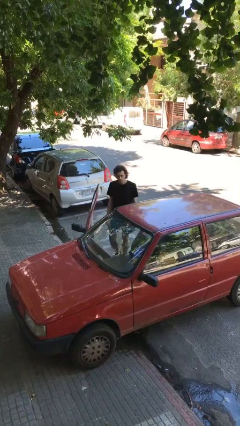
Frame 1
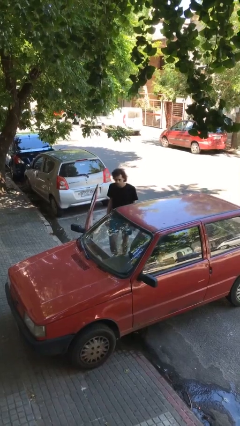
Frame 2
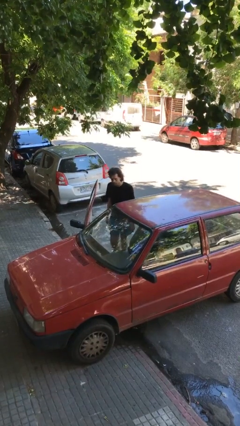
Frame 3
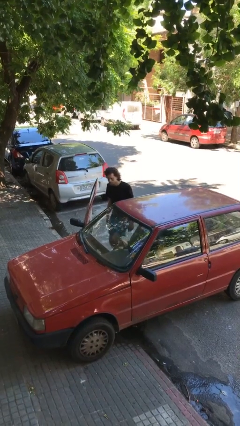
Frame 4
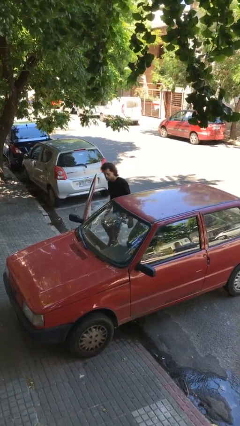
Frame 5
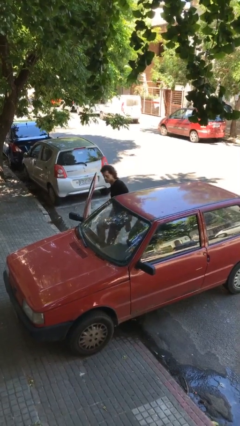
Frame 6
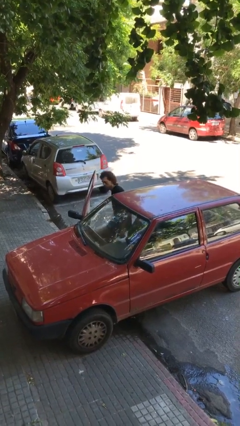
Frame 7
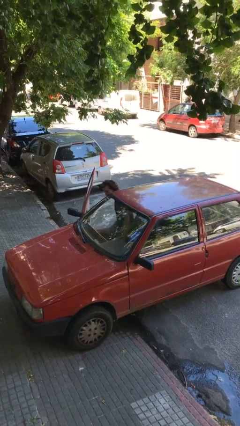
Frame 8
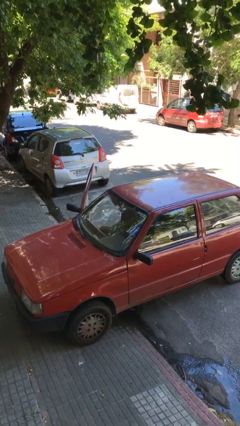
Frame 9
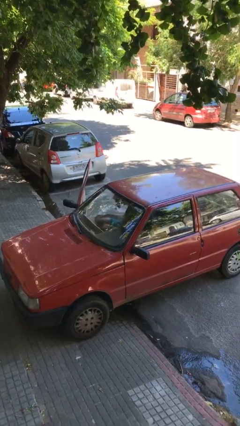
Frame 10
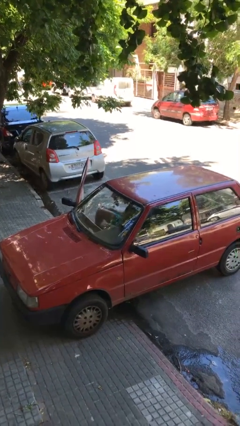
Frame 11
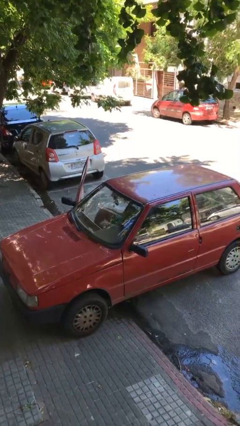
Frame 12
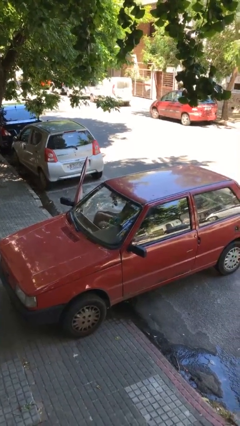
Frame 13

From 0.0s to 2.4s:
person enters car

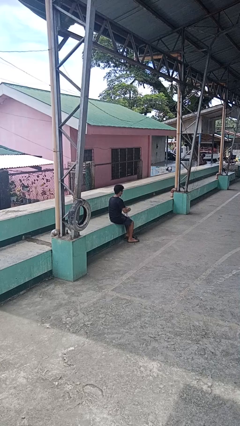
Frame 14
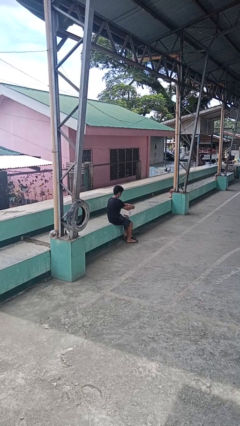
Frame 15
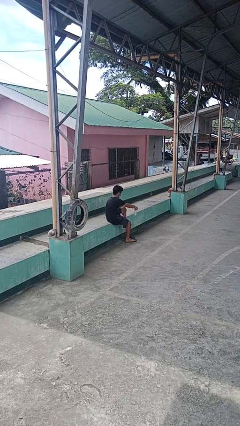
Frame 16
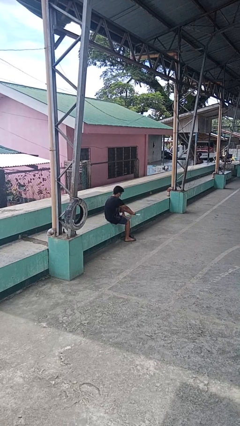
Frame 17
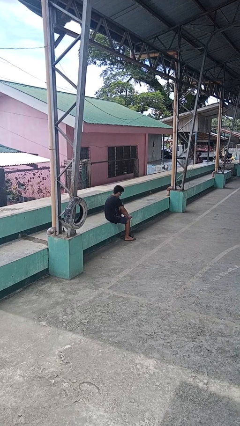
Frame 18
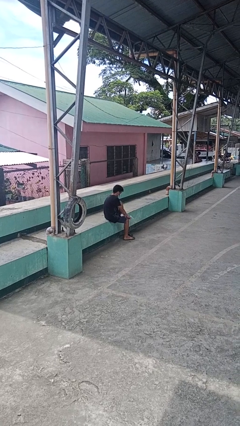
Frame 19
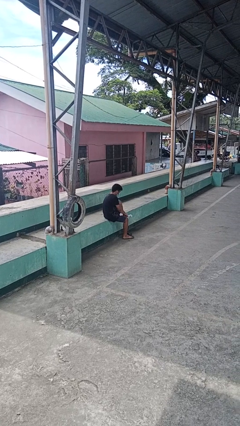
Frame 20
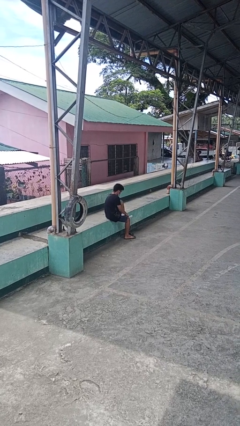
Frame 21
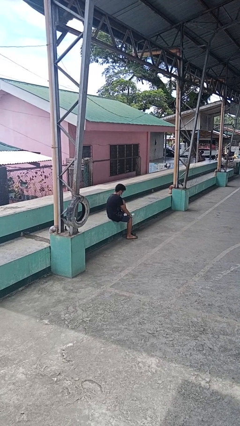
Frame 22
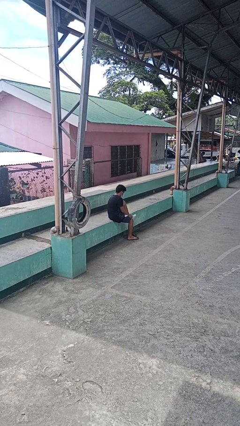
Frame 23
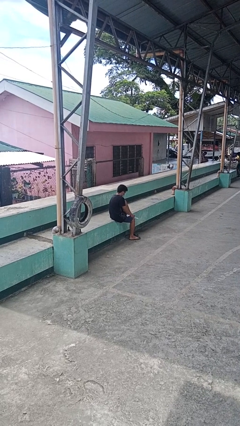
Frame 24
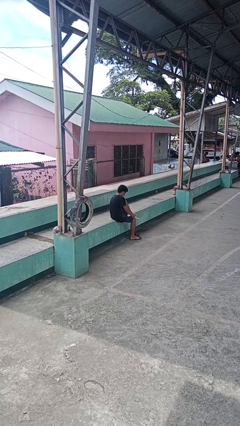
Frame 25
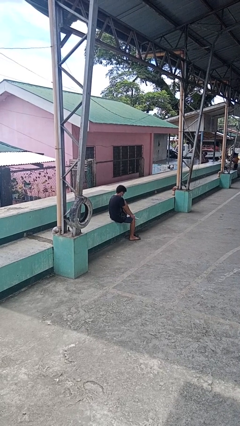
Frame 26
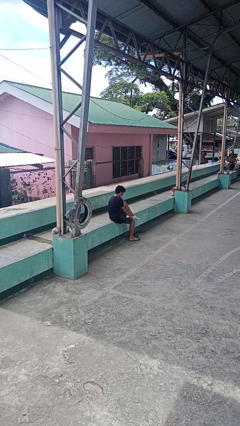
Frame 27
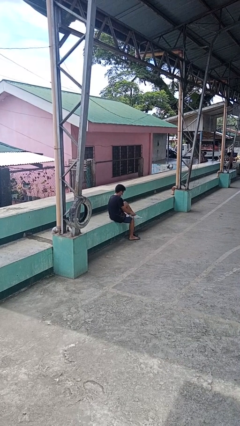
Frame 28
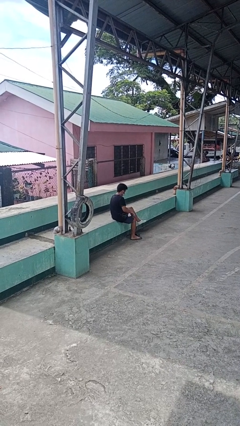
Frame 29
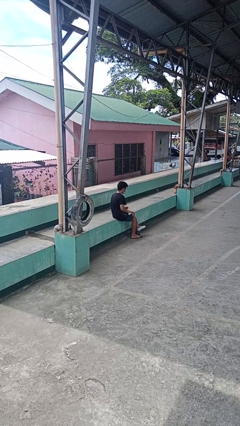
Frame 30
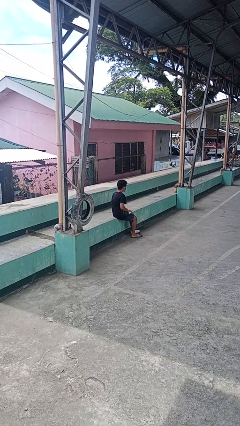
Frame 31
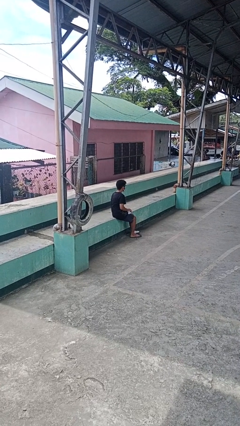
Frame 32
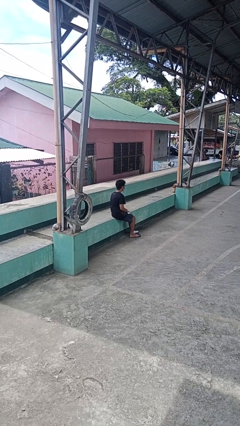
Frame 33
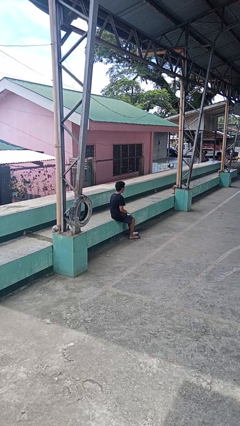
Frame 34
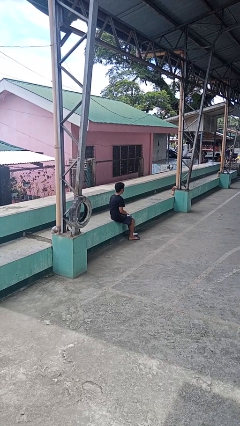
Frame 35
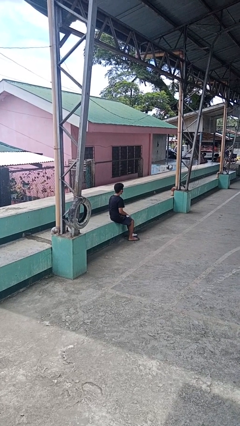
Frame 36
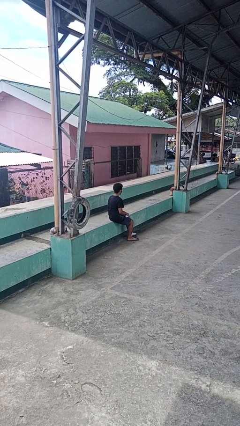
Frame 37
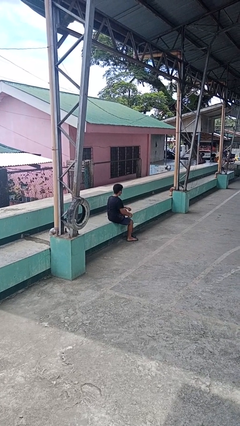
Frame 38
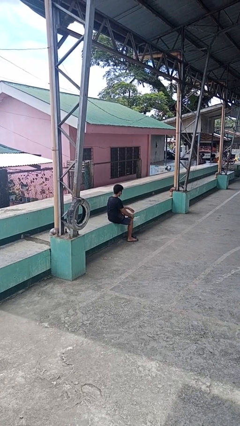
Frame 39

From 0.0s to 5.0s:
person puts on socks

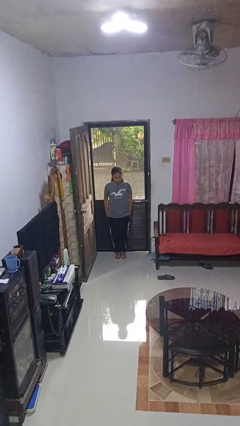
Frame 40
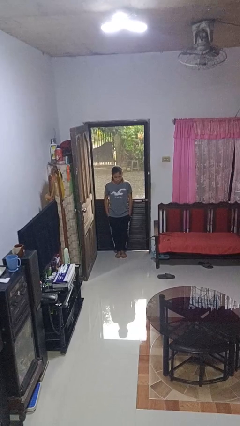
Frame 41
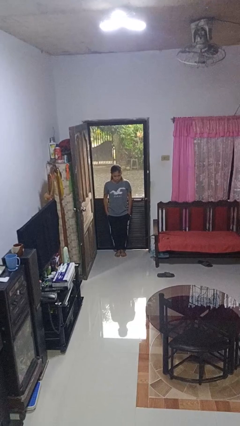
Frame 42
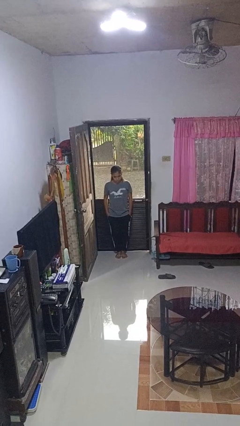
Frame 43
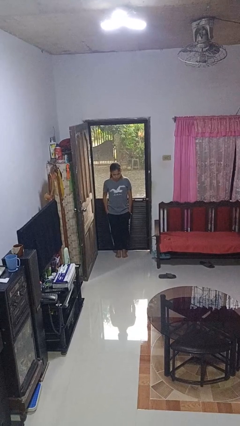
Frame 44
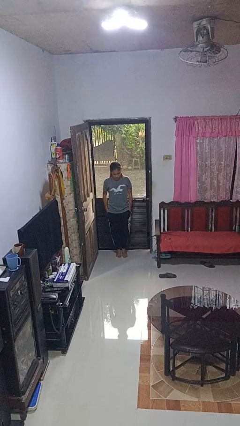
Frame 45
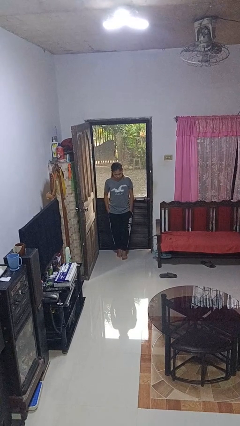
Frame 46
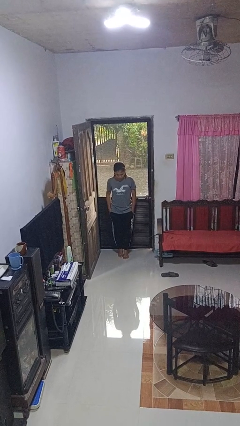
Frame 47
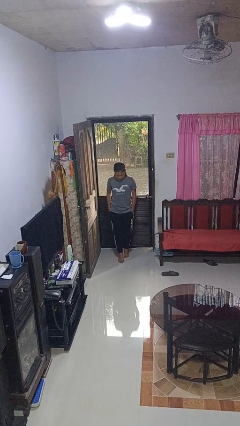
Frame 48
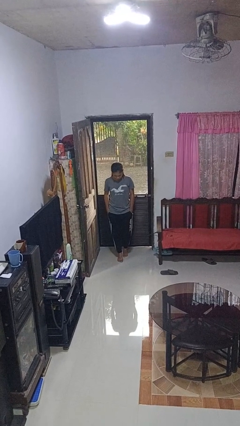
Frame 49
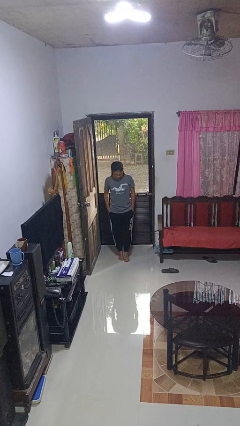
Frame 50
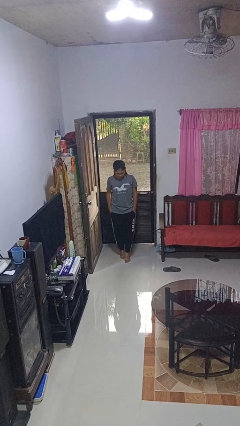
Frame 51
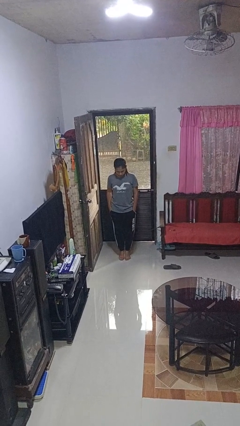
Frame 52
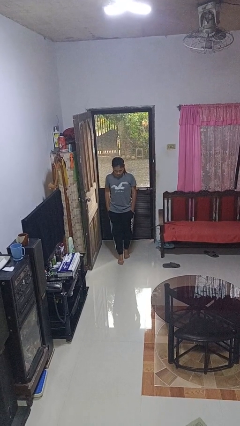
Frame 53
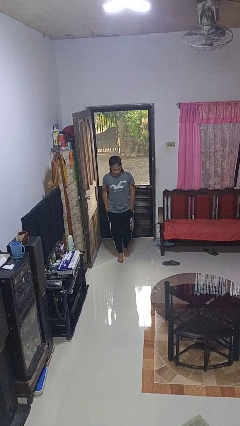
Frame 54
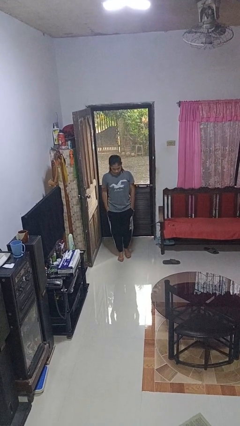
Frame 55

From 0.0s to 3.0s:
person walks tiptoe

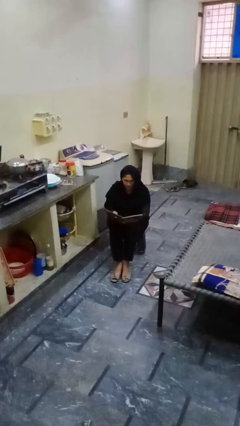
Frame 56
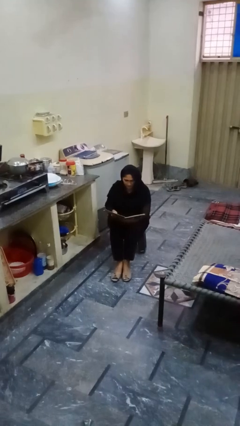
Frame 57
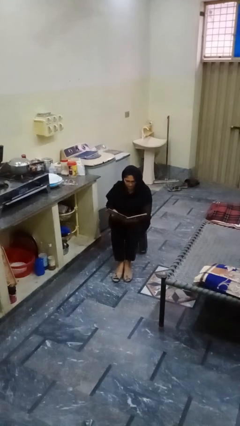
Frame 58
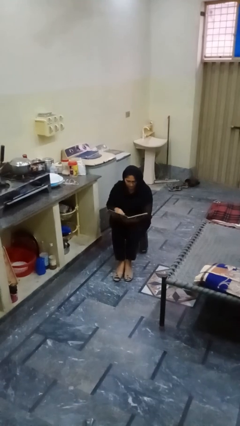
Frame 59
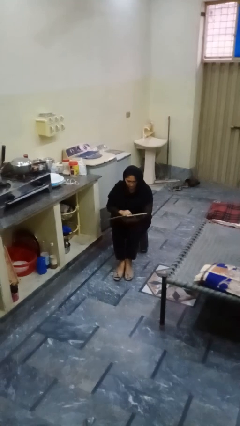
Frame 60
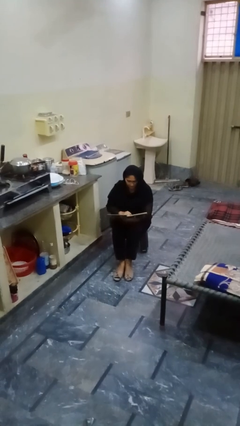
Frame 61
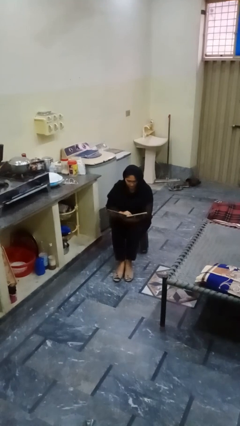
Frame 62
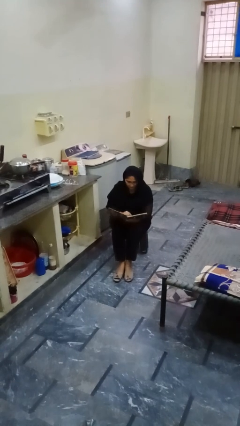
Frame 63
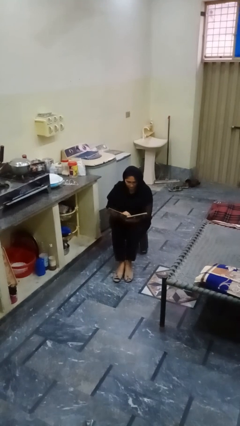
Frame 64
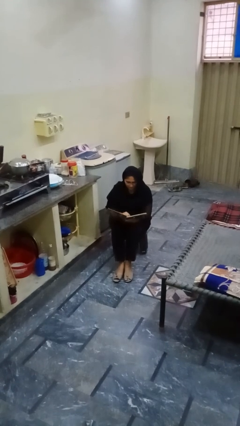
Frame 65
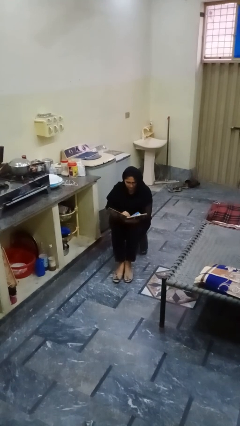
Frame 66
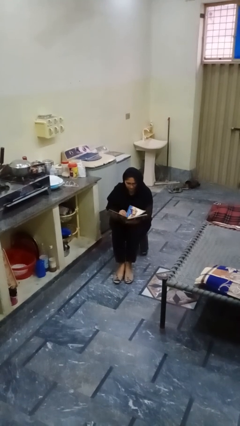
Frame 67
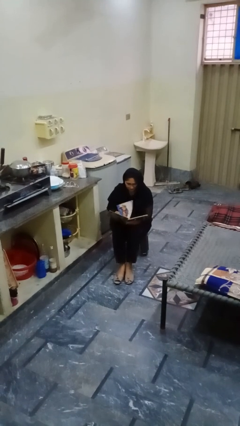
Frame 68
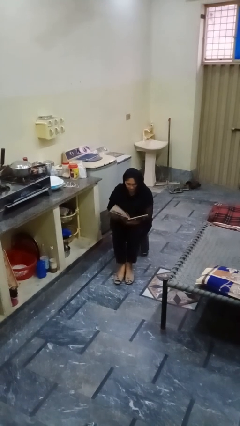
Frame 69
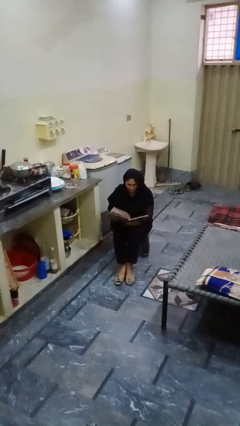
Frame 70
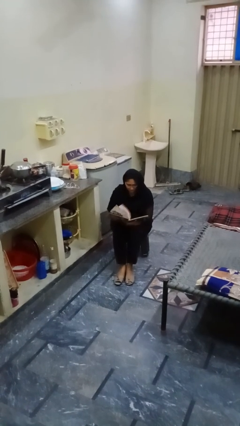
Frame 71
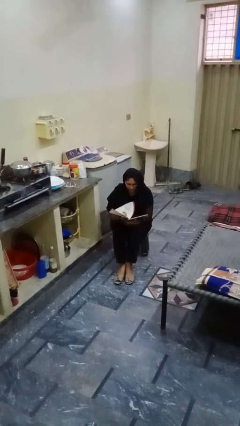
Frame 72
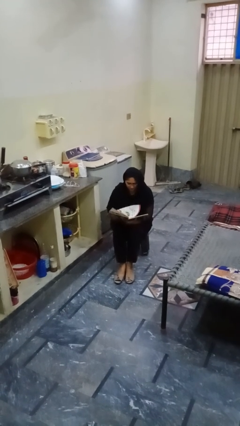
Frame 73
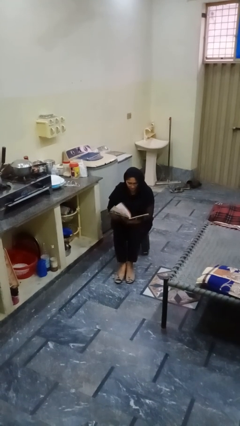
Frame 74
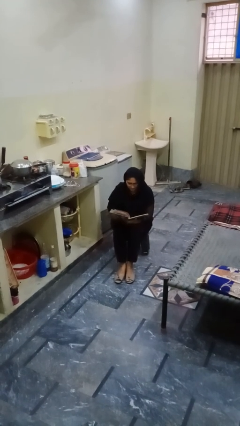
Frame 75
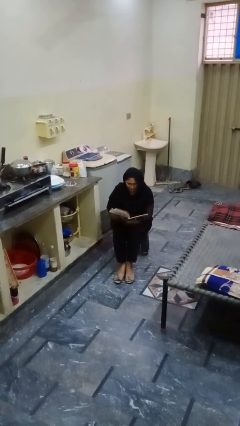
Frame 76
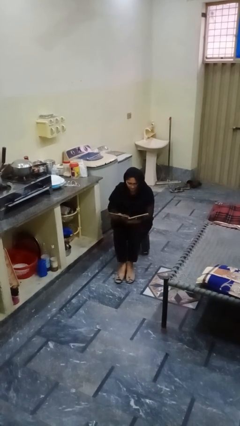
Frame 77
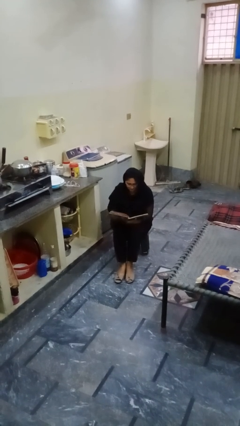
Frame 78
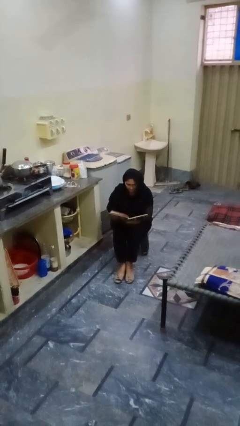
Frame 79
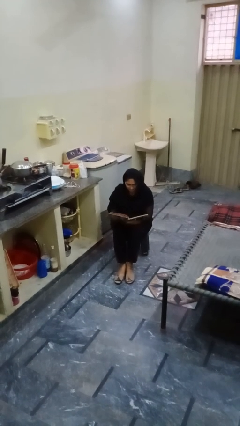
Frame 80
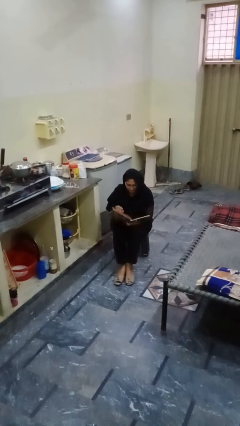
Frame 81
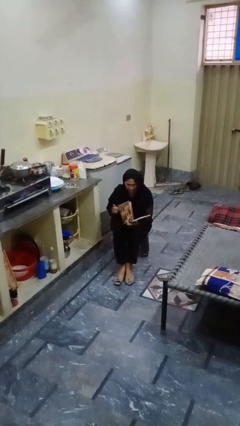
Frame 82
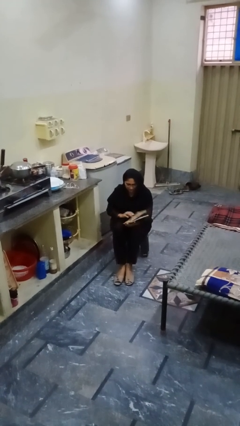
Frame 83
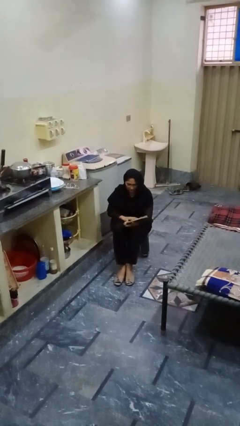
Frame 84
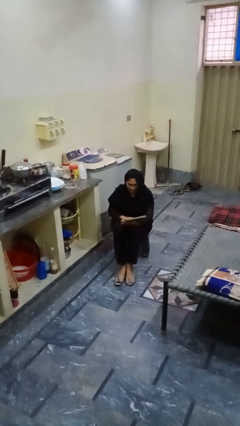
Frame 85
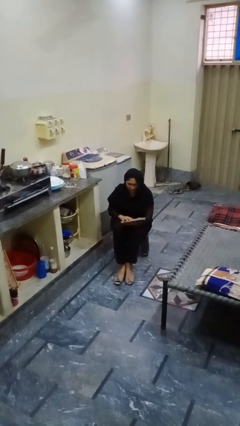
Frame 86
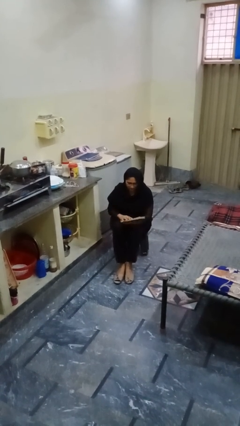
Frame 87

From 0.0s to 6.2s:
person reads book

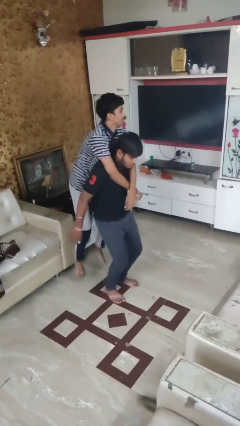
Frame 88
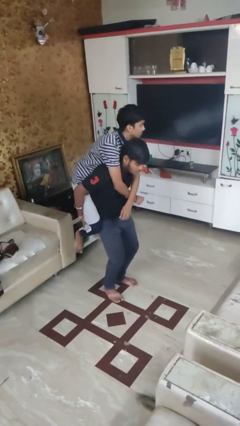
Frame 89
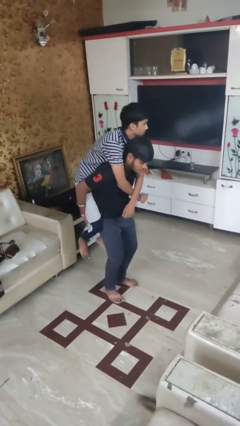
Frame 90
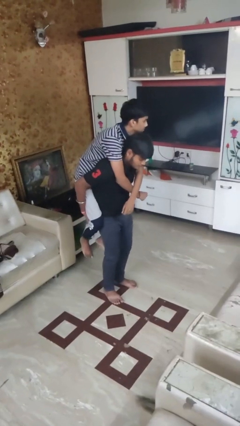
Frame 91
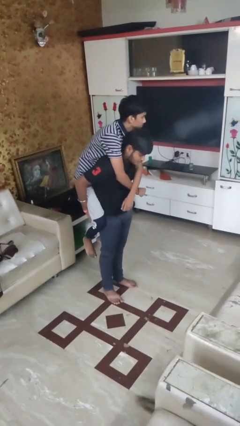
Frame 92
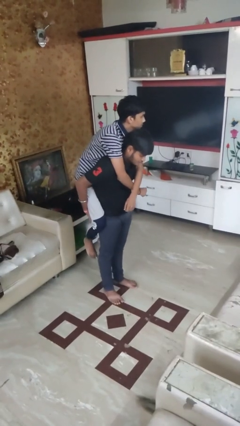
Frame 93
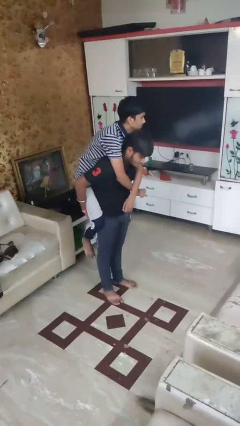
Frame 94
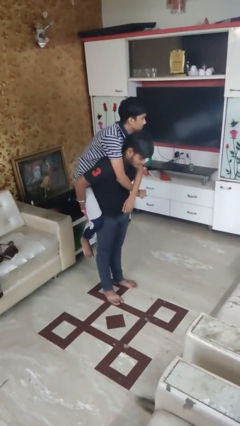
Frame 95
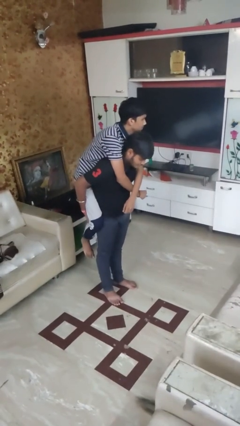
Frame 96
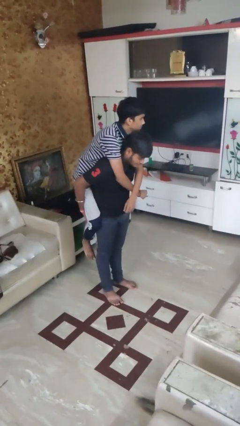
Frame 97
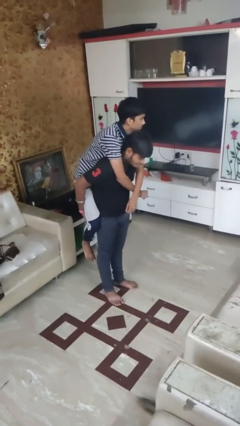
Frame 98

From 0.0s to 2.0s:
person carries person over shoulder
